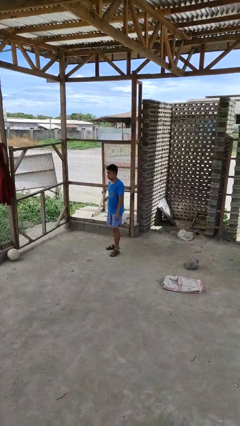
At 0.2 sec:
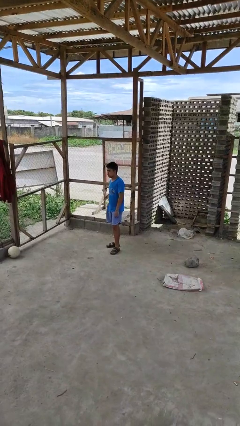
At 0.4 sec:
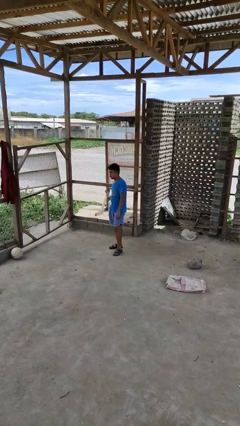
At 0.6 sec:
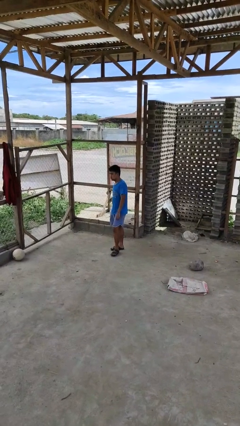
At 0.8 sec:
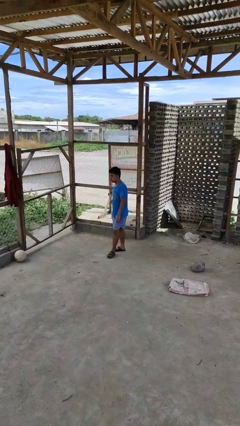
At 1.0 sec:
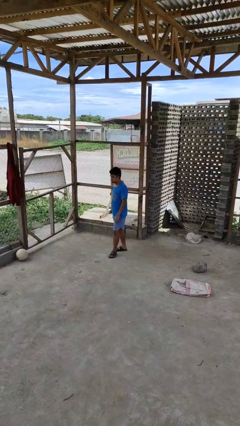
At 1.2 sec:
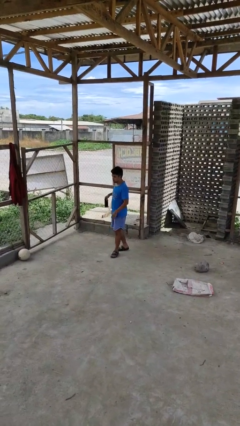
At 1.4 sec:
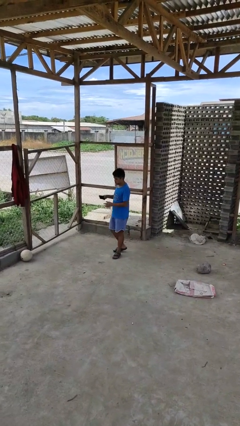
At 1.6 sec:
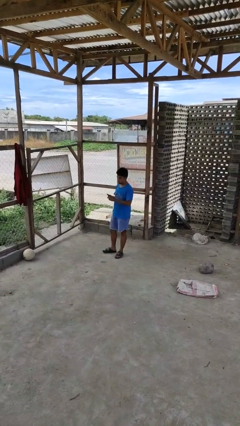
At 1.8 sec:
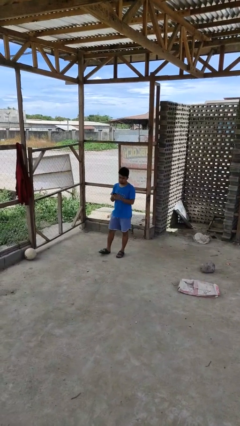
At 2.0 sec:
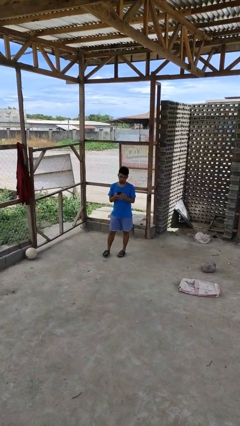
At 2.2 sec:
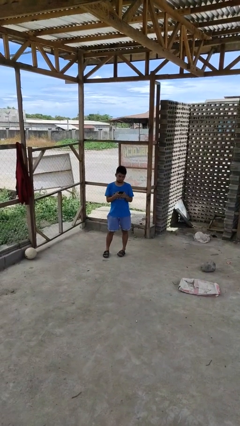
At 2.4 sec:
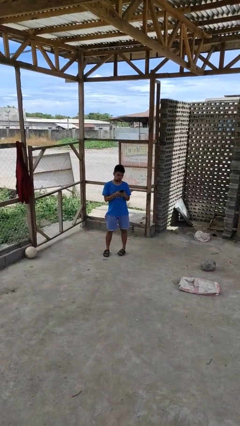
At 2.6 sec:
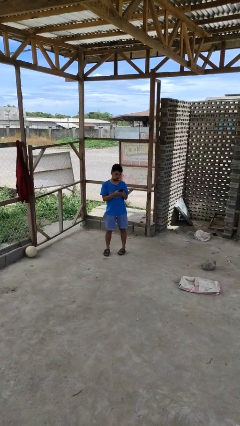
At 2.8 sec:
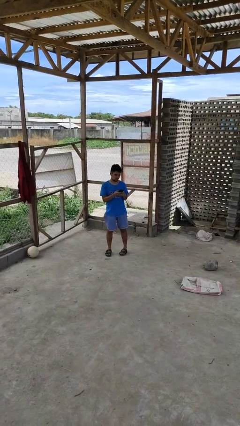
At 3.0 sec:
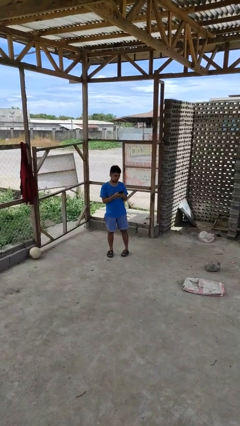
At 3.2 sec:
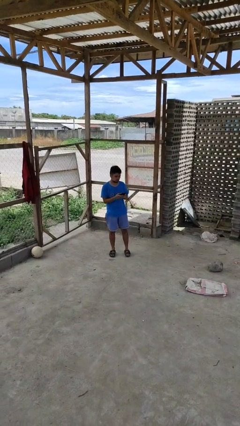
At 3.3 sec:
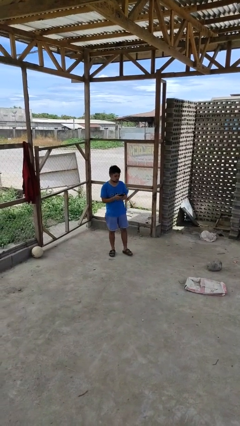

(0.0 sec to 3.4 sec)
person takes phone from pocket

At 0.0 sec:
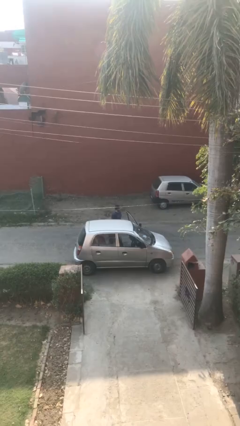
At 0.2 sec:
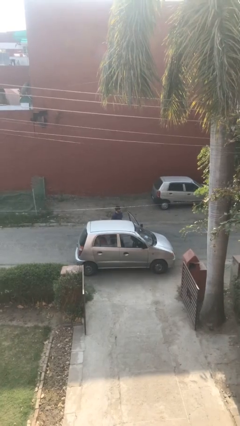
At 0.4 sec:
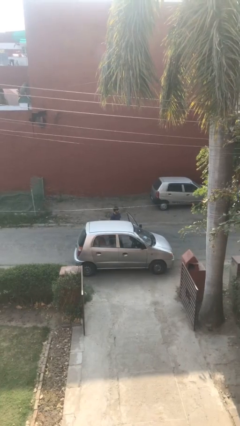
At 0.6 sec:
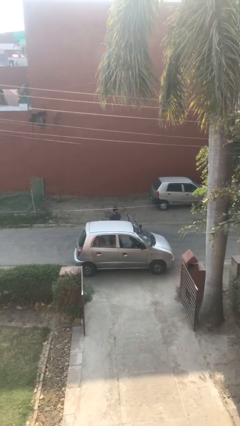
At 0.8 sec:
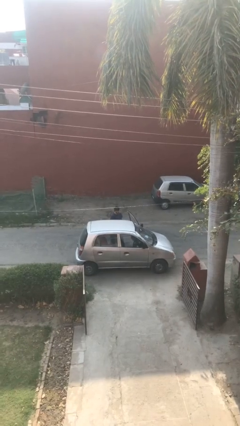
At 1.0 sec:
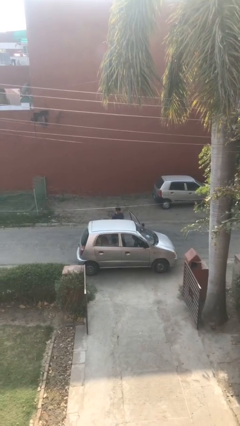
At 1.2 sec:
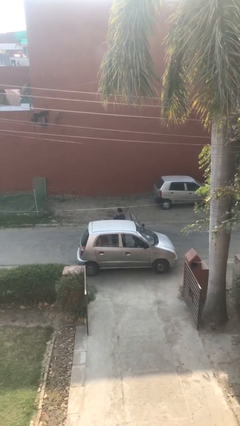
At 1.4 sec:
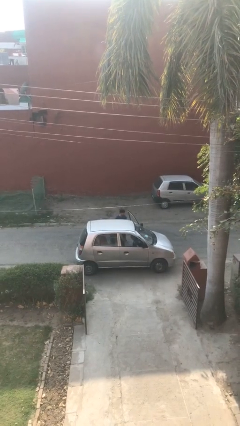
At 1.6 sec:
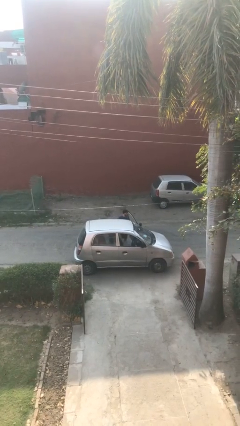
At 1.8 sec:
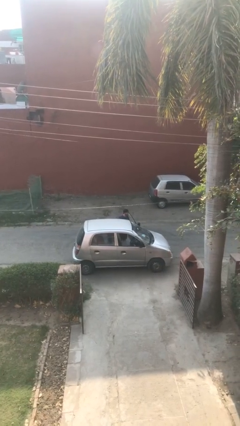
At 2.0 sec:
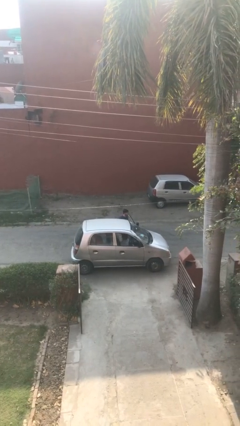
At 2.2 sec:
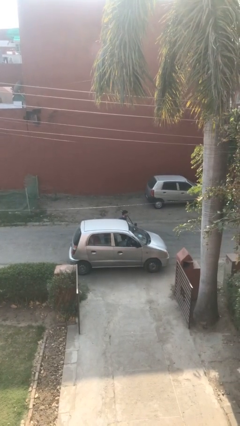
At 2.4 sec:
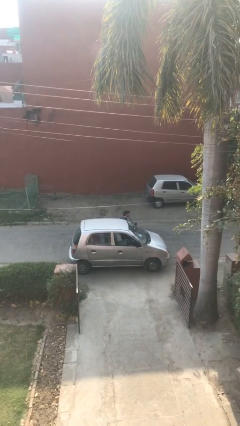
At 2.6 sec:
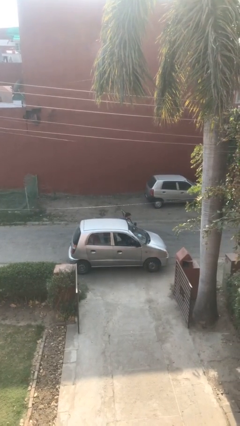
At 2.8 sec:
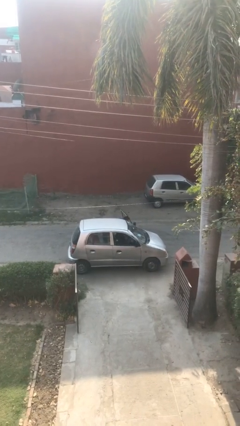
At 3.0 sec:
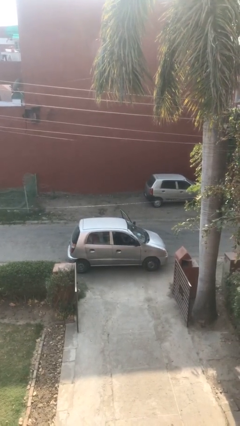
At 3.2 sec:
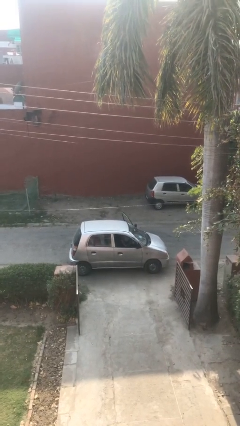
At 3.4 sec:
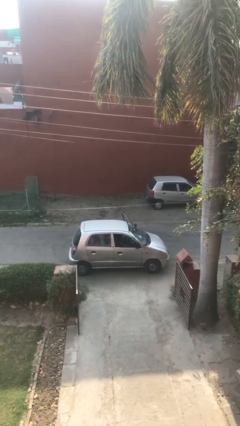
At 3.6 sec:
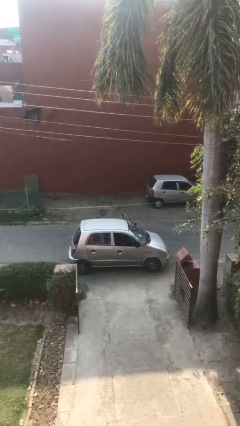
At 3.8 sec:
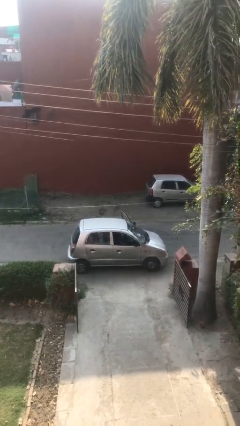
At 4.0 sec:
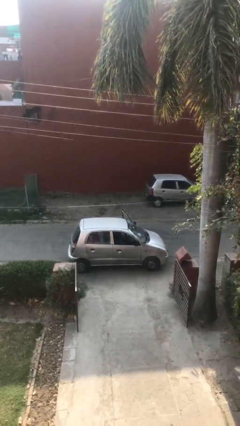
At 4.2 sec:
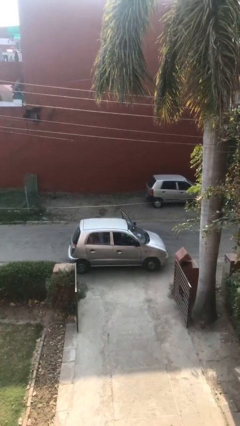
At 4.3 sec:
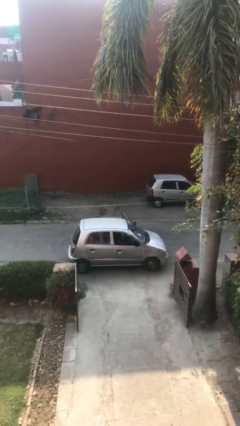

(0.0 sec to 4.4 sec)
person enters car

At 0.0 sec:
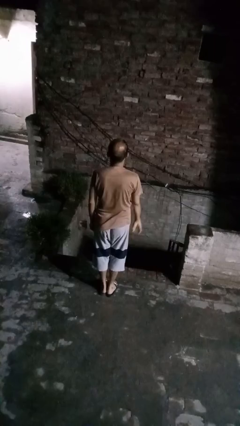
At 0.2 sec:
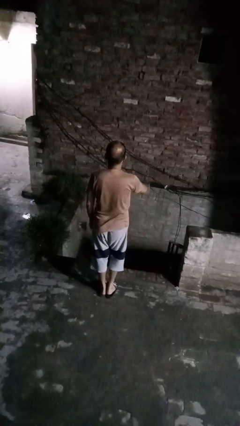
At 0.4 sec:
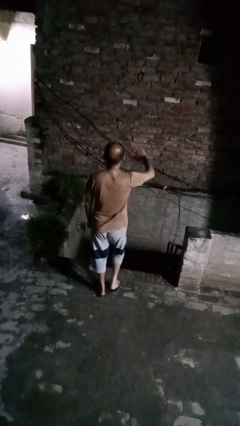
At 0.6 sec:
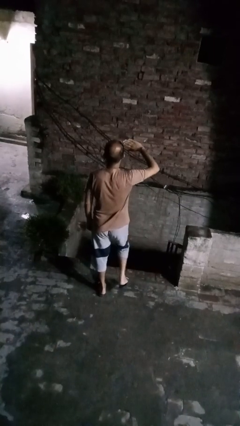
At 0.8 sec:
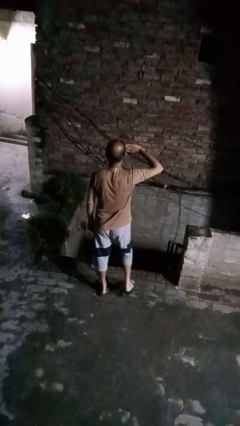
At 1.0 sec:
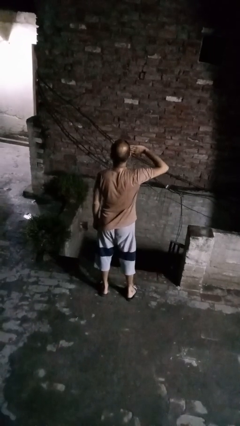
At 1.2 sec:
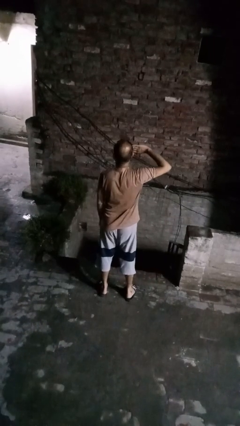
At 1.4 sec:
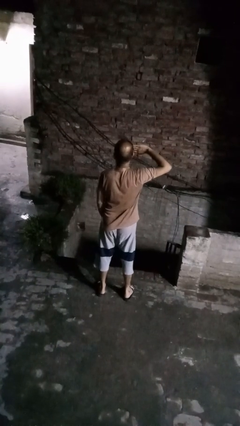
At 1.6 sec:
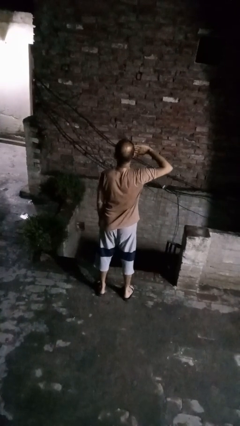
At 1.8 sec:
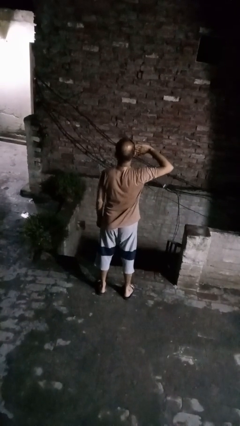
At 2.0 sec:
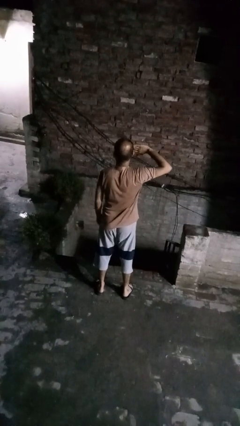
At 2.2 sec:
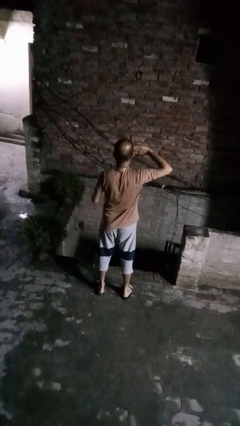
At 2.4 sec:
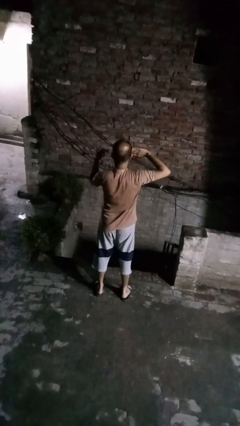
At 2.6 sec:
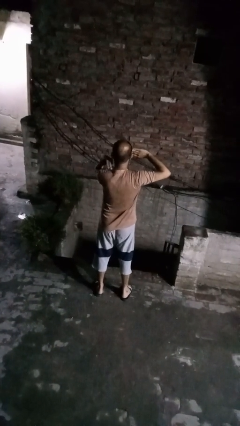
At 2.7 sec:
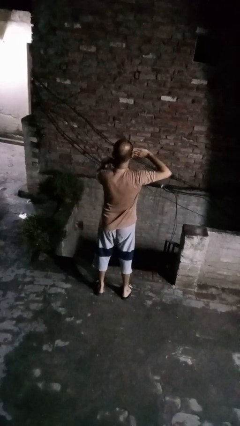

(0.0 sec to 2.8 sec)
person salutes

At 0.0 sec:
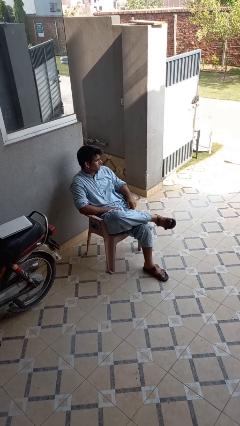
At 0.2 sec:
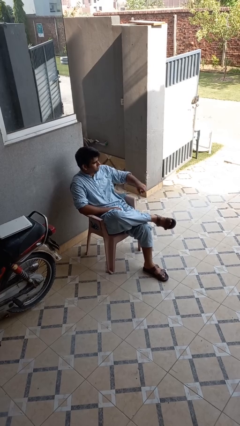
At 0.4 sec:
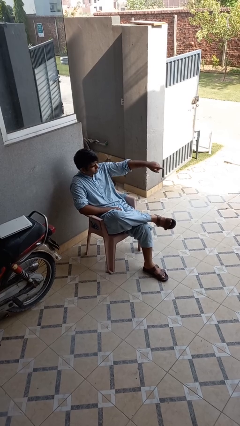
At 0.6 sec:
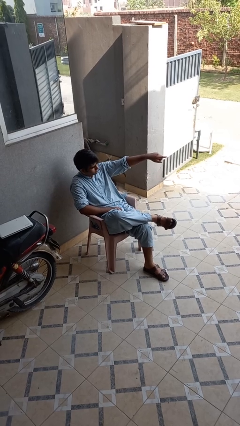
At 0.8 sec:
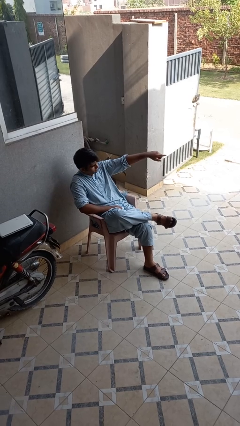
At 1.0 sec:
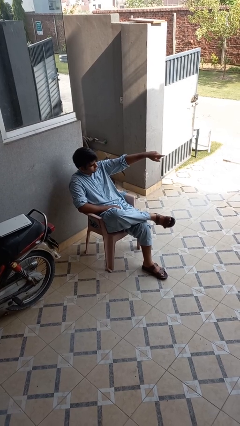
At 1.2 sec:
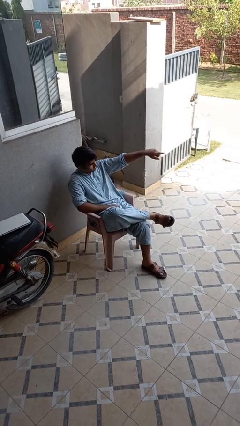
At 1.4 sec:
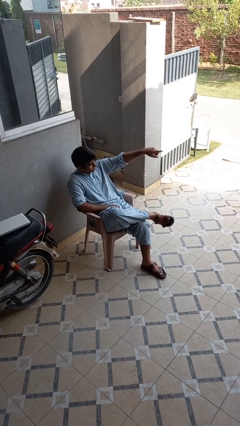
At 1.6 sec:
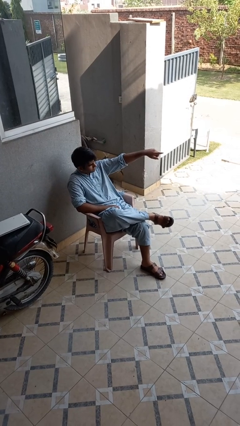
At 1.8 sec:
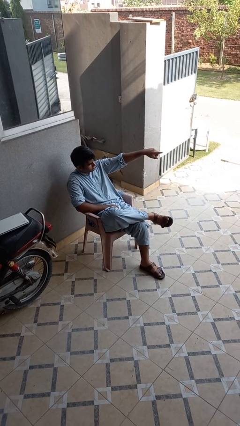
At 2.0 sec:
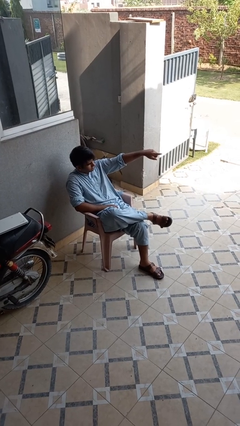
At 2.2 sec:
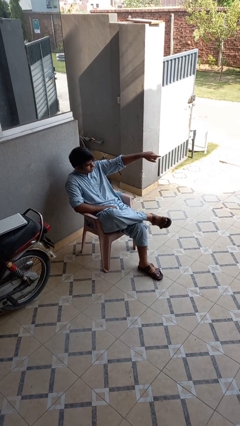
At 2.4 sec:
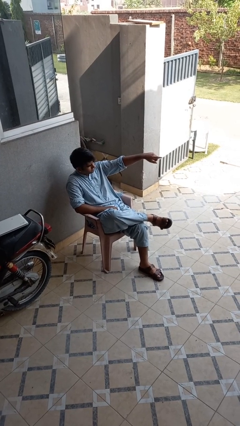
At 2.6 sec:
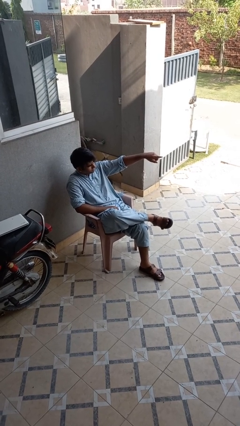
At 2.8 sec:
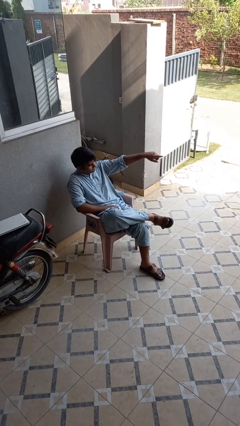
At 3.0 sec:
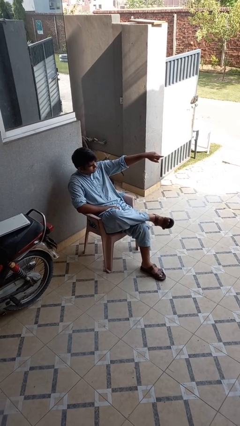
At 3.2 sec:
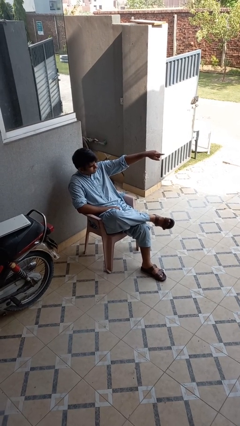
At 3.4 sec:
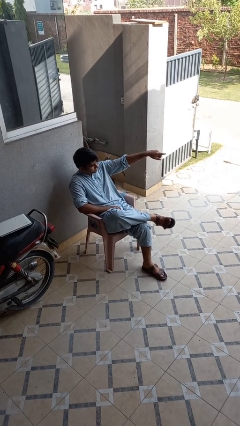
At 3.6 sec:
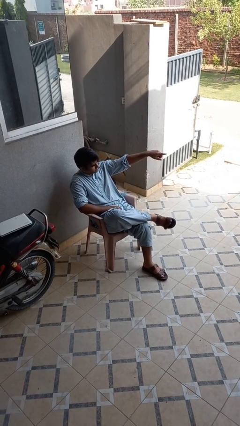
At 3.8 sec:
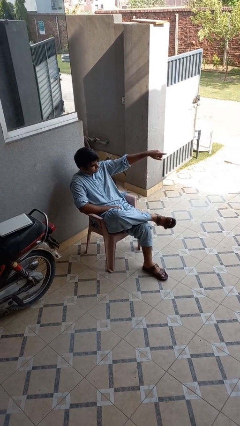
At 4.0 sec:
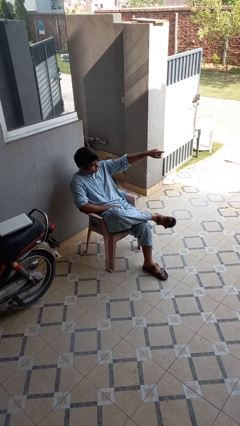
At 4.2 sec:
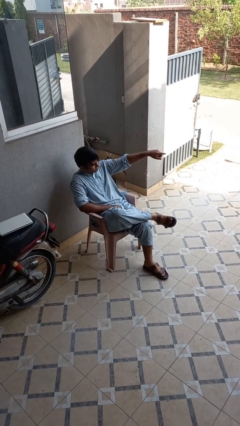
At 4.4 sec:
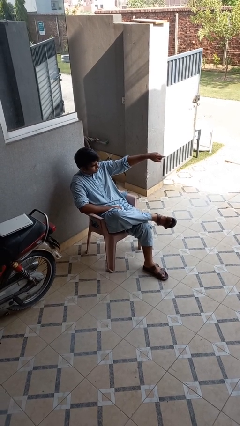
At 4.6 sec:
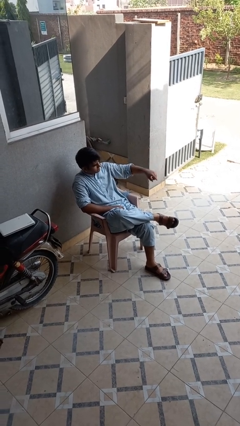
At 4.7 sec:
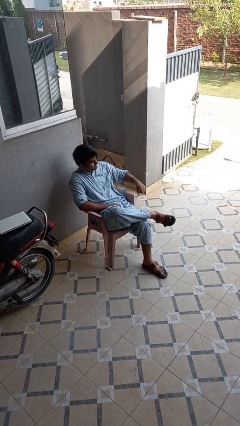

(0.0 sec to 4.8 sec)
person points at person

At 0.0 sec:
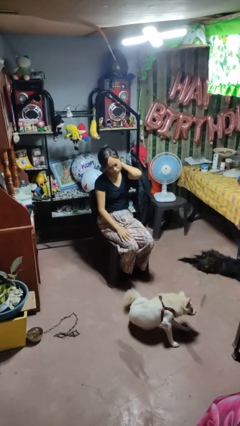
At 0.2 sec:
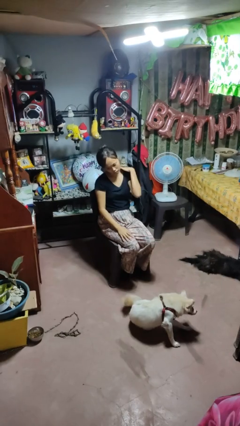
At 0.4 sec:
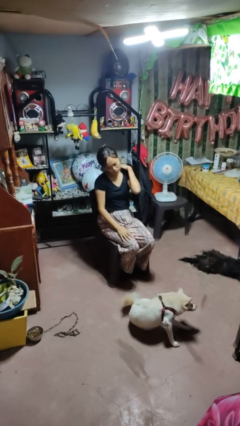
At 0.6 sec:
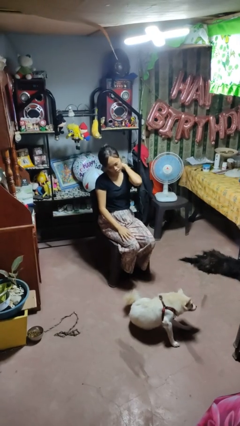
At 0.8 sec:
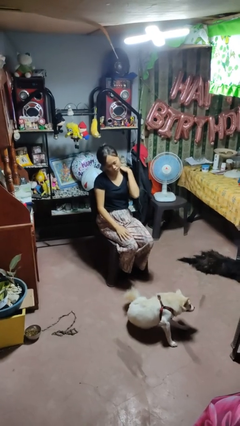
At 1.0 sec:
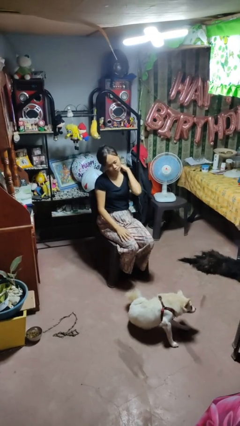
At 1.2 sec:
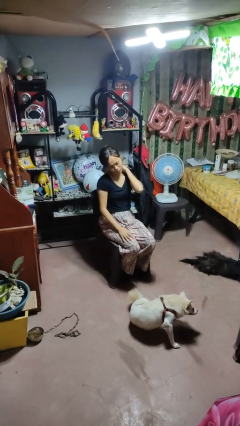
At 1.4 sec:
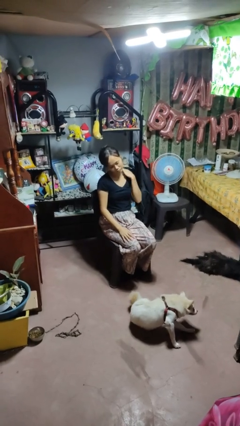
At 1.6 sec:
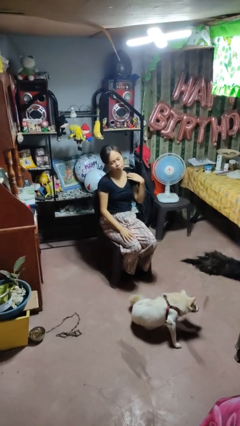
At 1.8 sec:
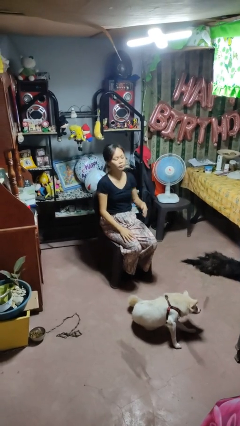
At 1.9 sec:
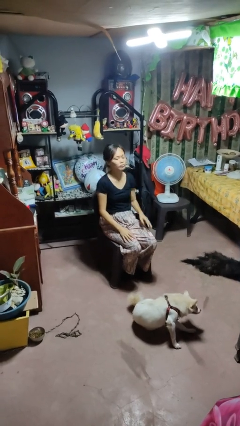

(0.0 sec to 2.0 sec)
person rubs neck
